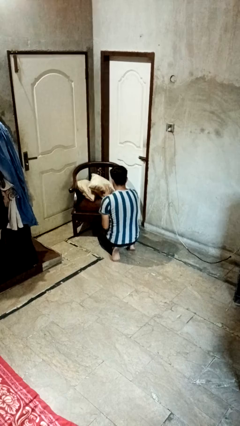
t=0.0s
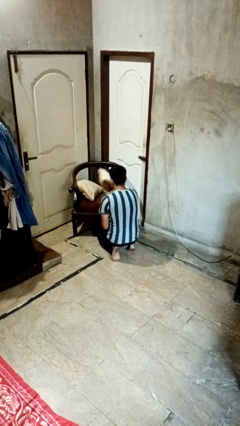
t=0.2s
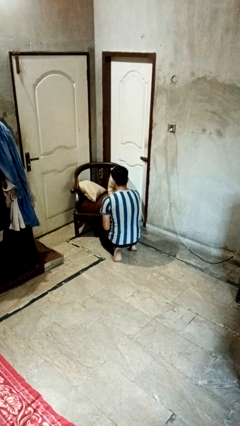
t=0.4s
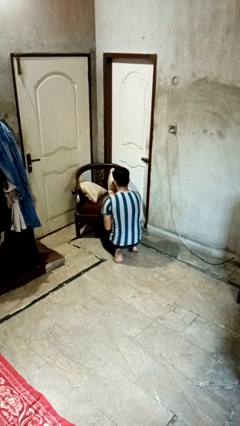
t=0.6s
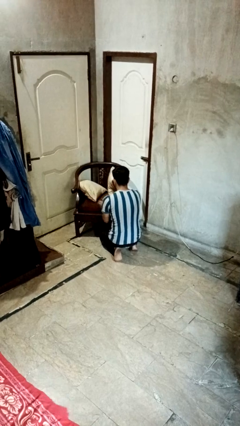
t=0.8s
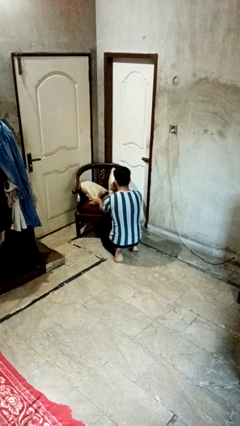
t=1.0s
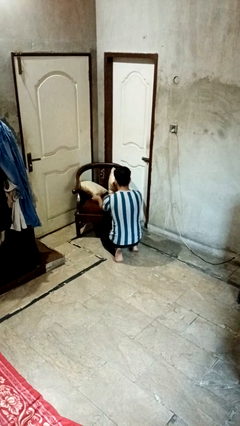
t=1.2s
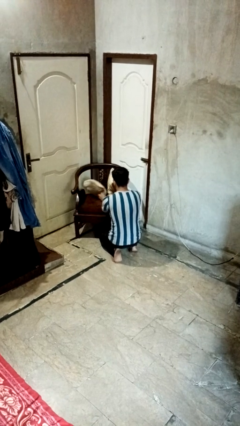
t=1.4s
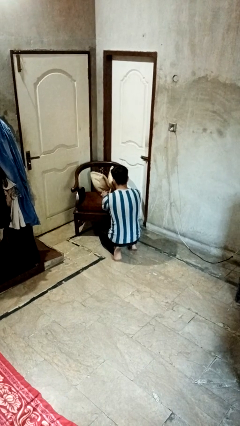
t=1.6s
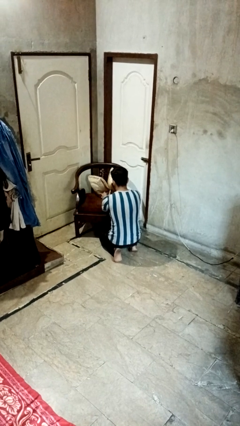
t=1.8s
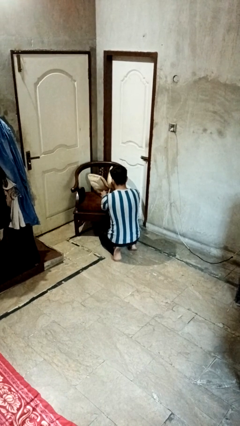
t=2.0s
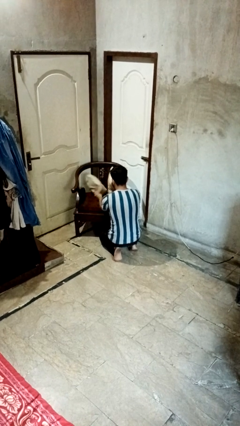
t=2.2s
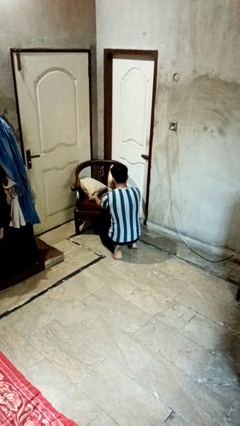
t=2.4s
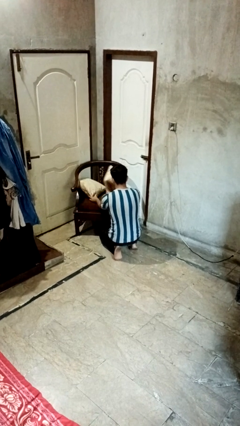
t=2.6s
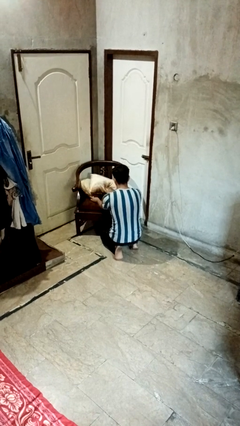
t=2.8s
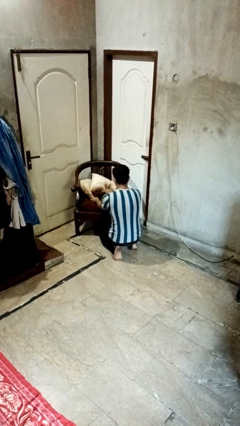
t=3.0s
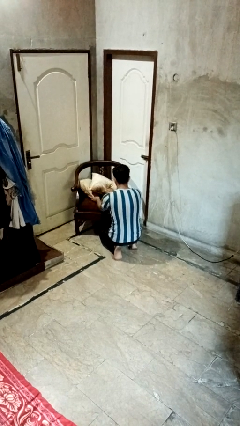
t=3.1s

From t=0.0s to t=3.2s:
person searches in couch

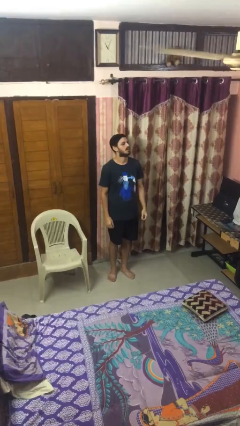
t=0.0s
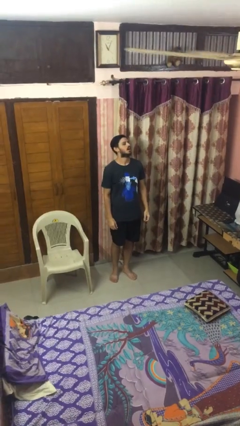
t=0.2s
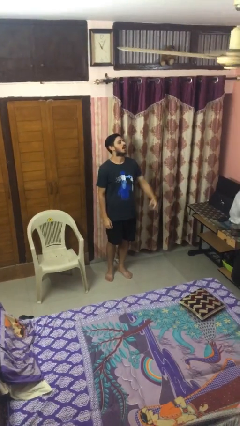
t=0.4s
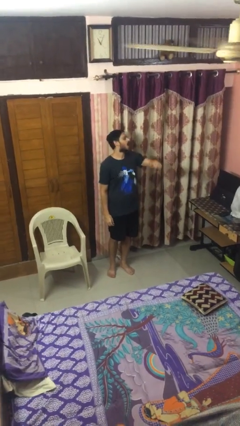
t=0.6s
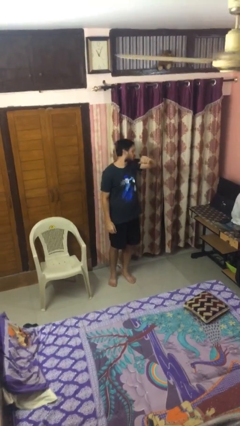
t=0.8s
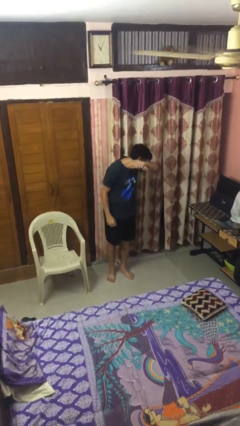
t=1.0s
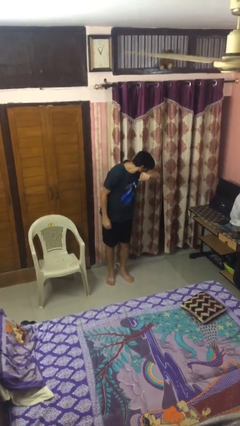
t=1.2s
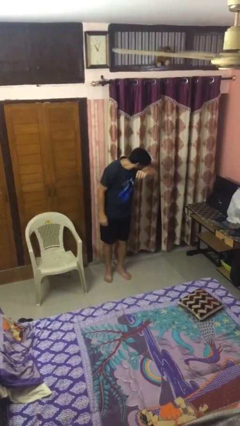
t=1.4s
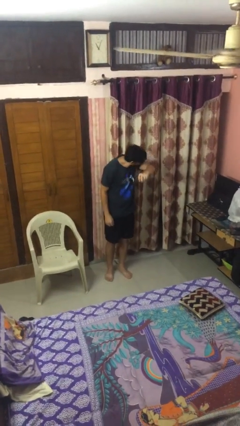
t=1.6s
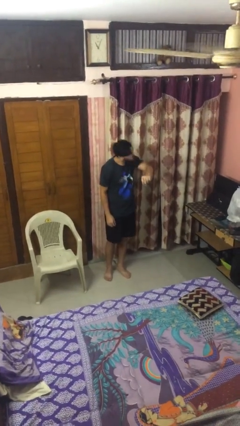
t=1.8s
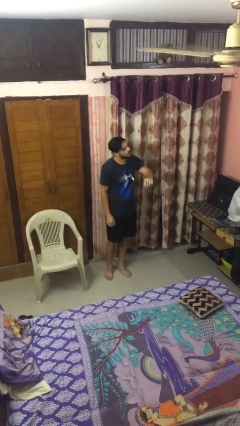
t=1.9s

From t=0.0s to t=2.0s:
person sneezes into arm

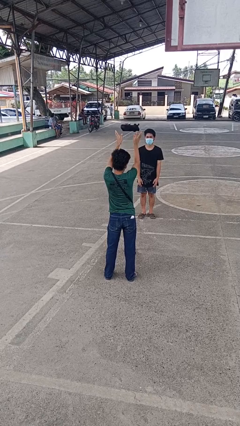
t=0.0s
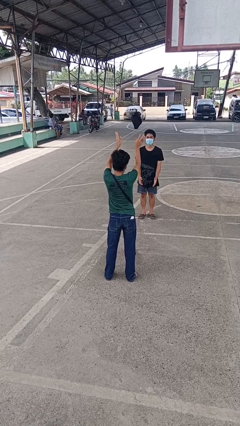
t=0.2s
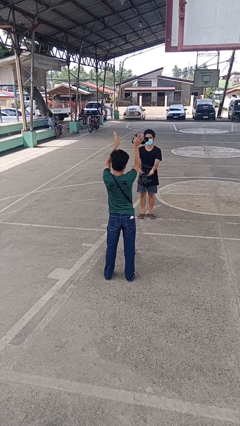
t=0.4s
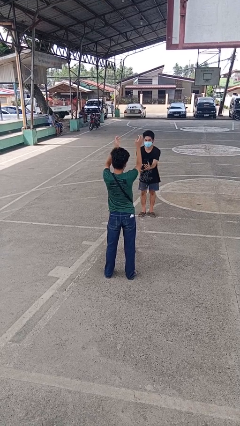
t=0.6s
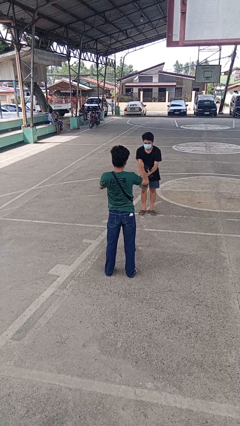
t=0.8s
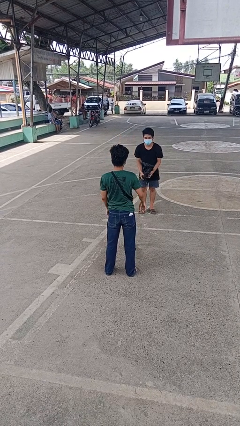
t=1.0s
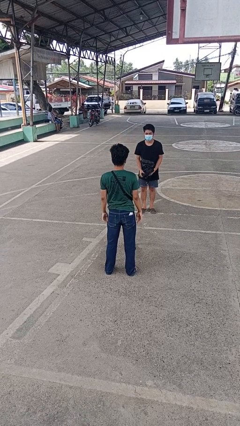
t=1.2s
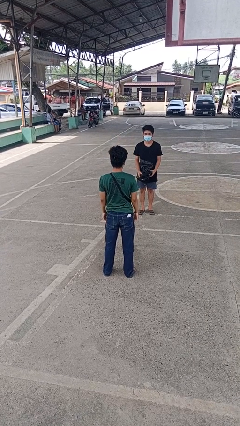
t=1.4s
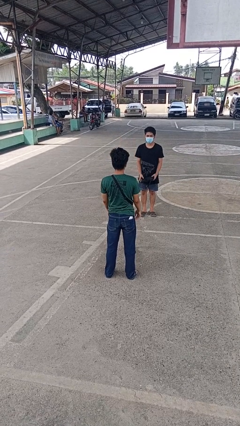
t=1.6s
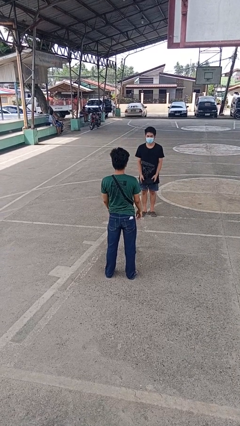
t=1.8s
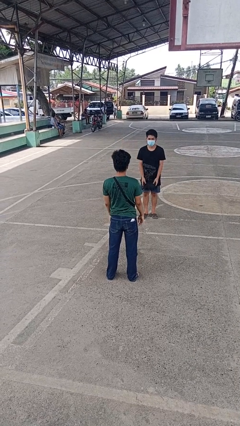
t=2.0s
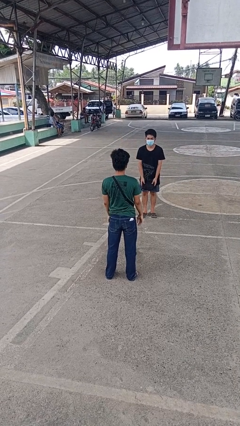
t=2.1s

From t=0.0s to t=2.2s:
person throws object to person

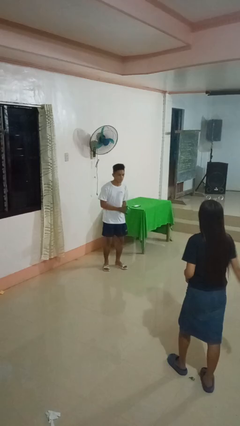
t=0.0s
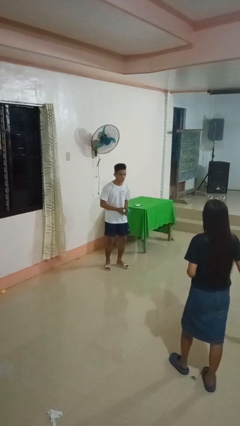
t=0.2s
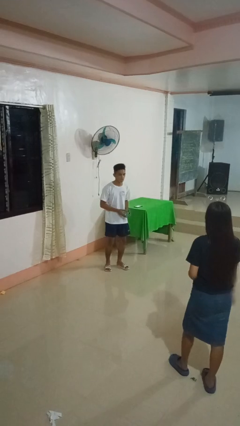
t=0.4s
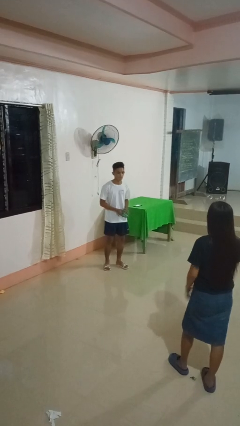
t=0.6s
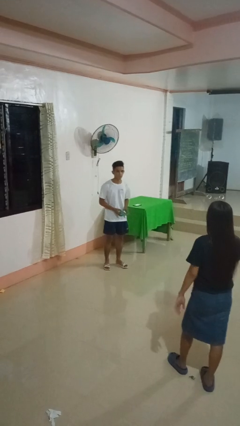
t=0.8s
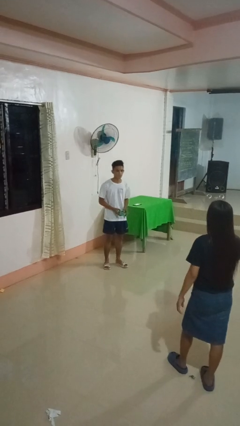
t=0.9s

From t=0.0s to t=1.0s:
person catches object from person

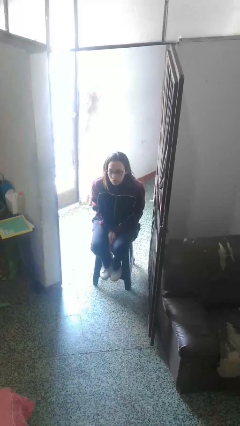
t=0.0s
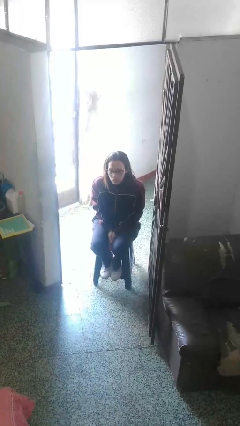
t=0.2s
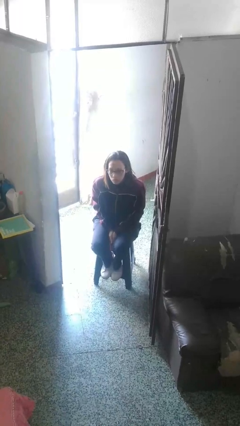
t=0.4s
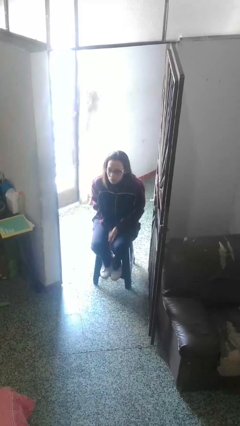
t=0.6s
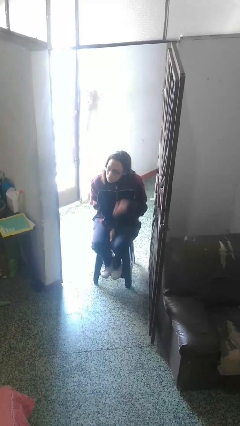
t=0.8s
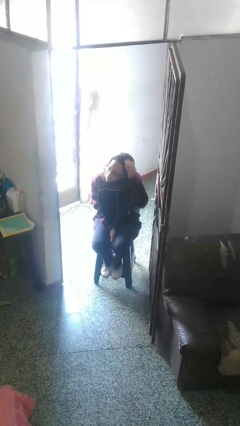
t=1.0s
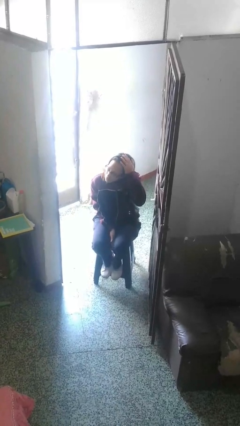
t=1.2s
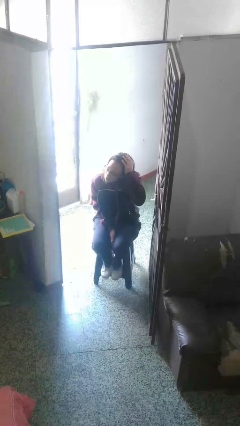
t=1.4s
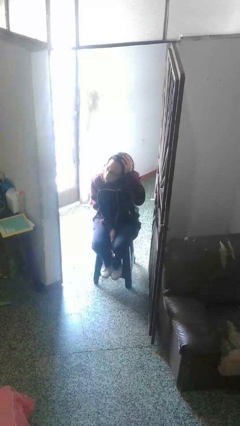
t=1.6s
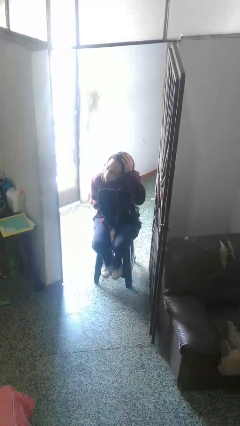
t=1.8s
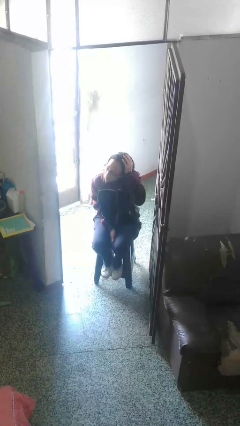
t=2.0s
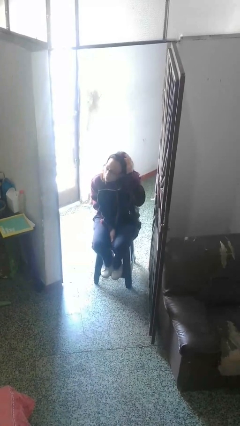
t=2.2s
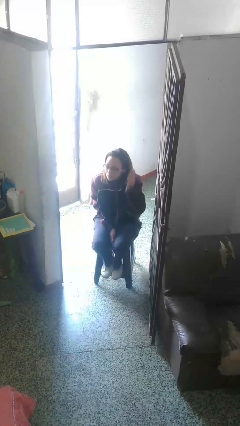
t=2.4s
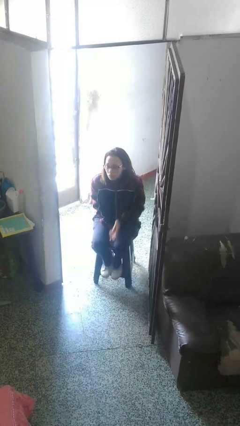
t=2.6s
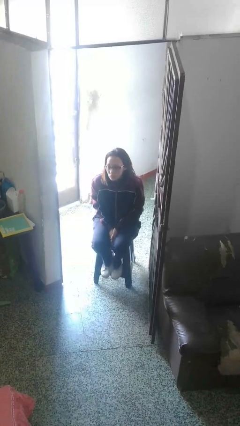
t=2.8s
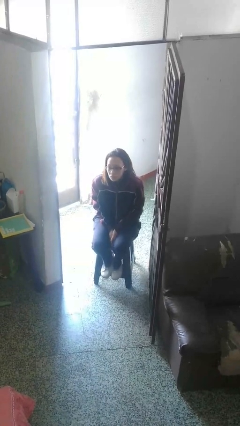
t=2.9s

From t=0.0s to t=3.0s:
person pats head

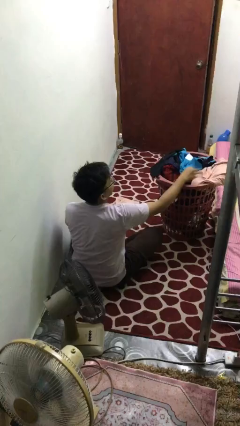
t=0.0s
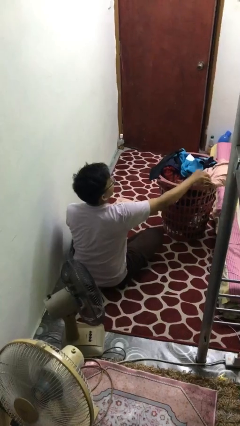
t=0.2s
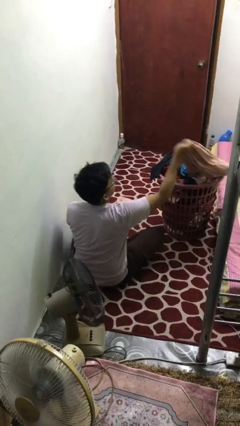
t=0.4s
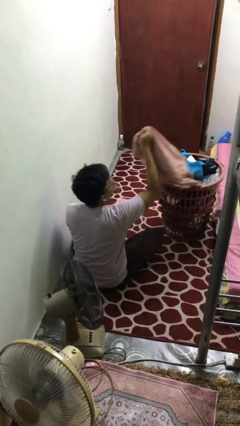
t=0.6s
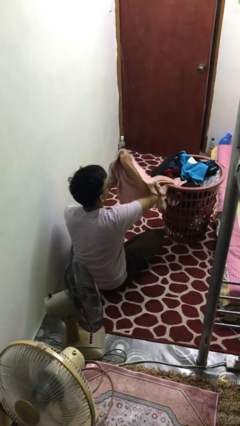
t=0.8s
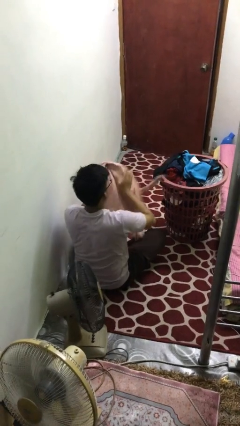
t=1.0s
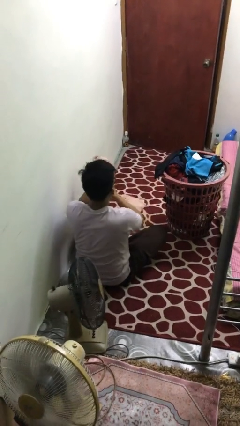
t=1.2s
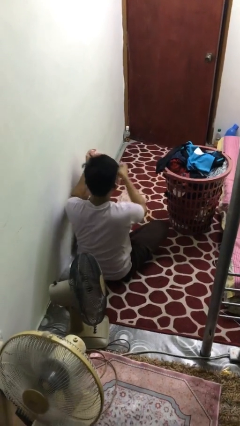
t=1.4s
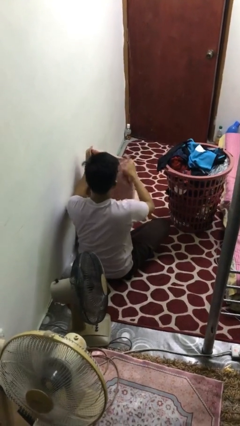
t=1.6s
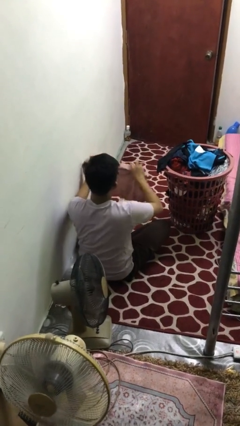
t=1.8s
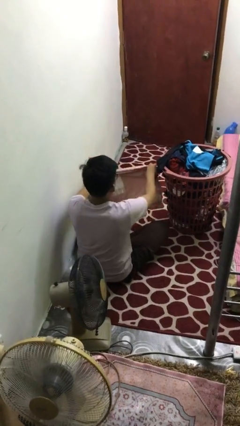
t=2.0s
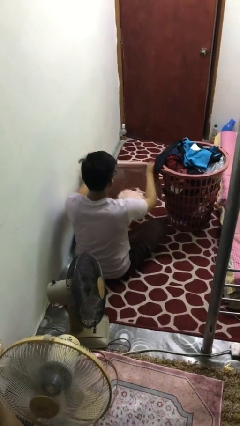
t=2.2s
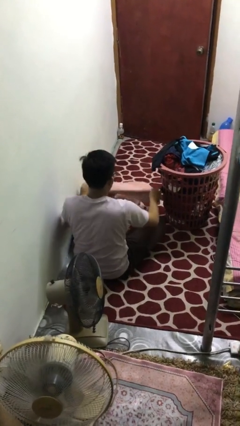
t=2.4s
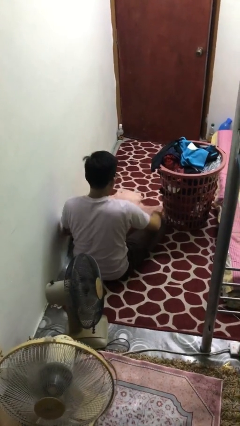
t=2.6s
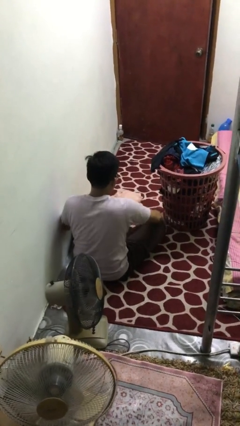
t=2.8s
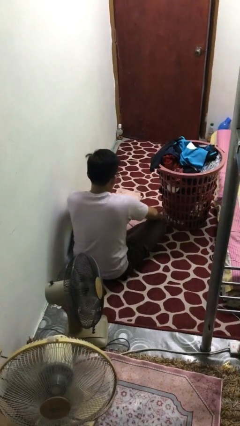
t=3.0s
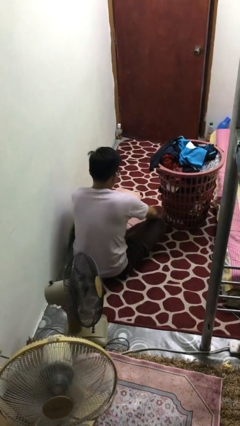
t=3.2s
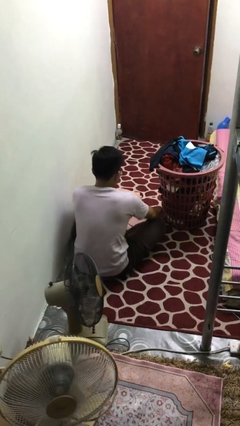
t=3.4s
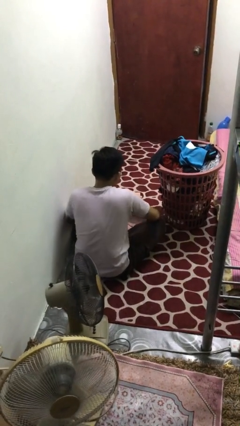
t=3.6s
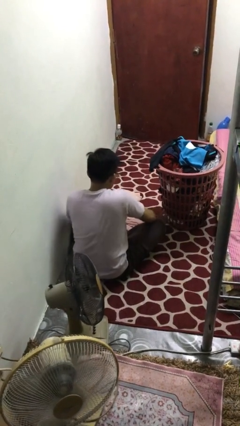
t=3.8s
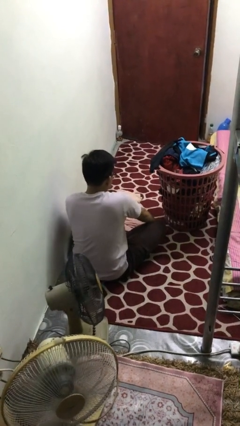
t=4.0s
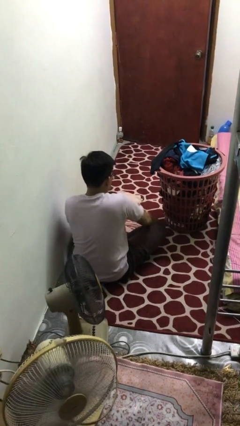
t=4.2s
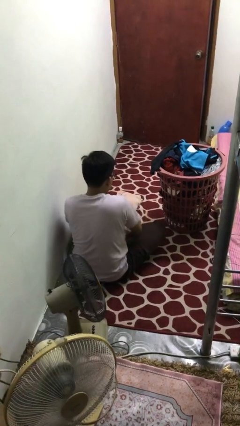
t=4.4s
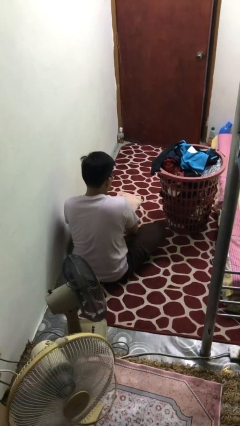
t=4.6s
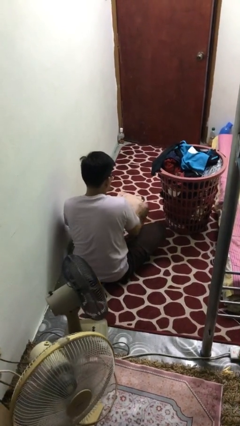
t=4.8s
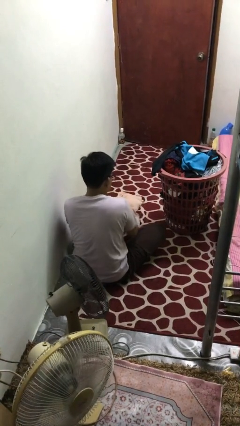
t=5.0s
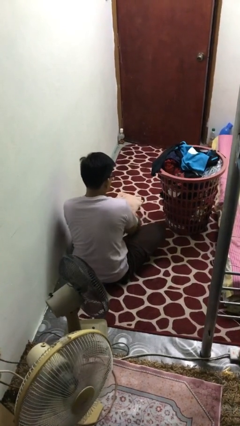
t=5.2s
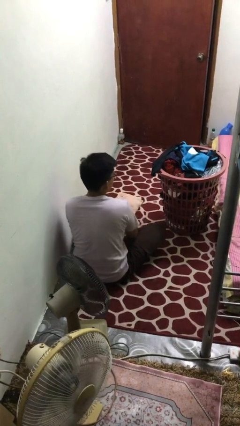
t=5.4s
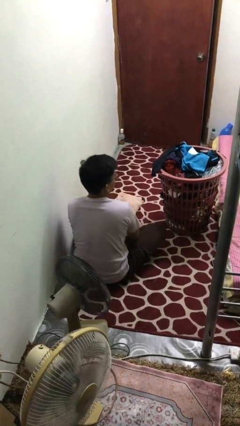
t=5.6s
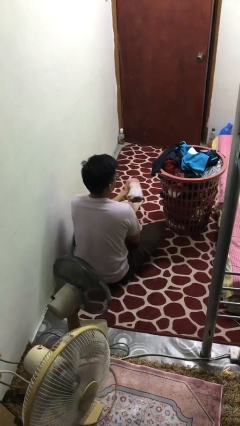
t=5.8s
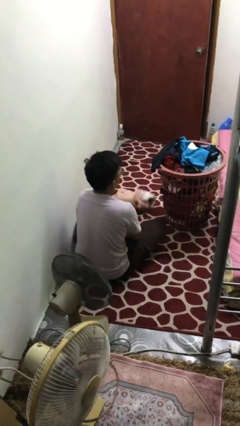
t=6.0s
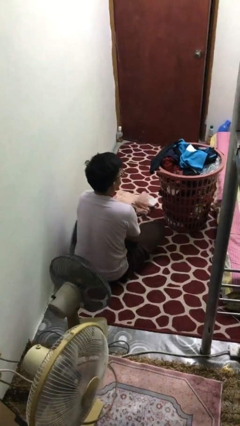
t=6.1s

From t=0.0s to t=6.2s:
person folds shirt
